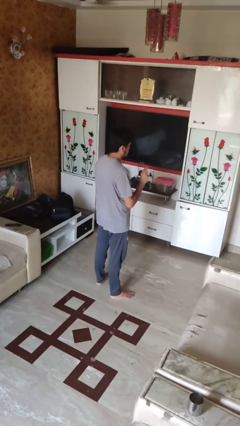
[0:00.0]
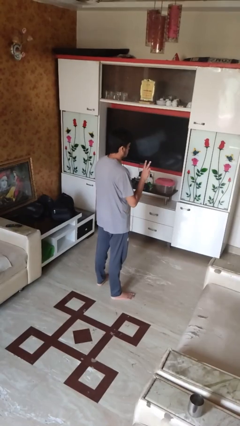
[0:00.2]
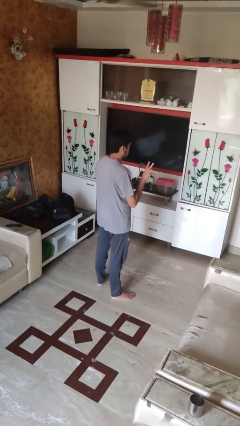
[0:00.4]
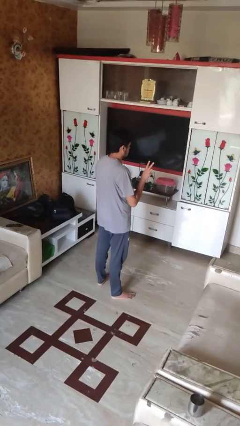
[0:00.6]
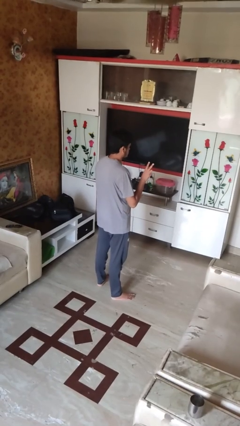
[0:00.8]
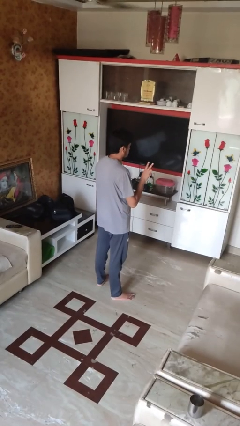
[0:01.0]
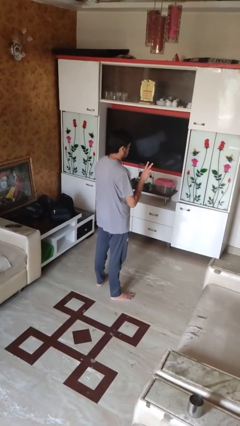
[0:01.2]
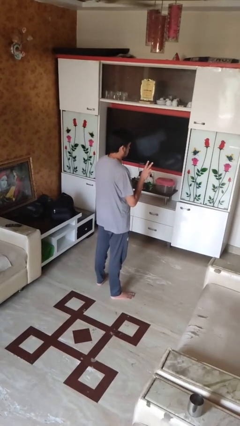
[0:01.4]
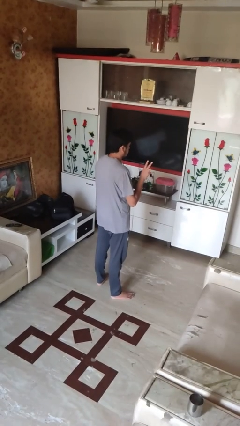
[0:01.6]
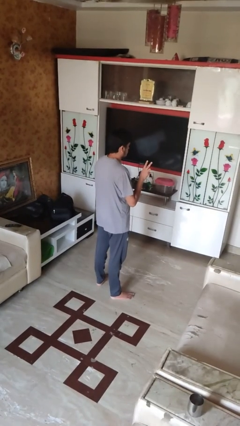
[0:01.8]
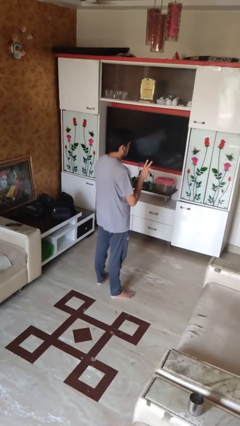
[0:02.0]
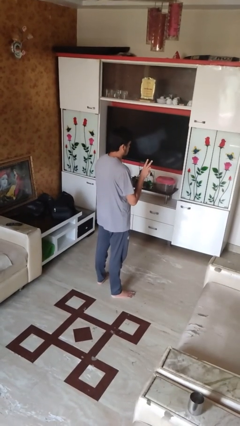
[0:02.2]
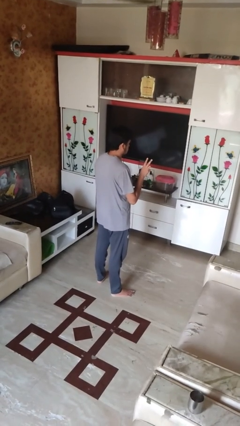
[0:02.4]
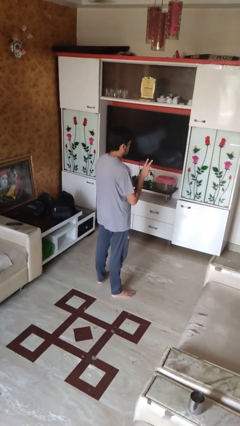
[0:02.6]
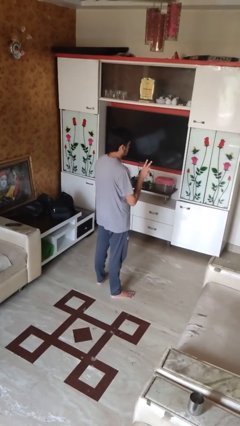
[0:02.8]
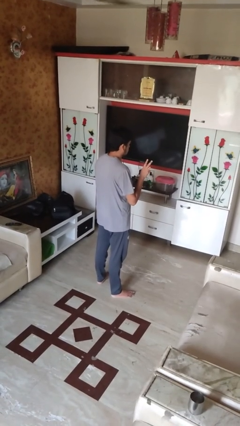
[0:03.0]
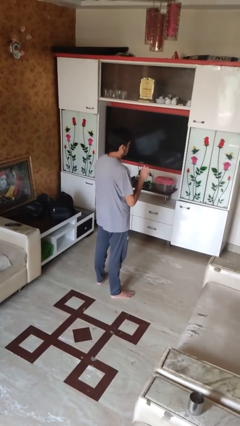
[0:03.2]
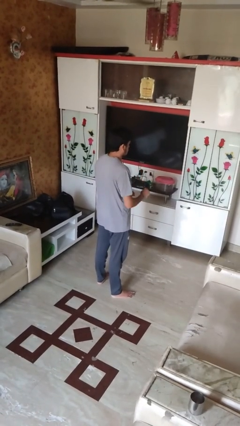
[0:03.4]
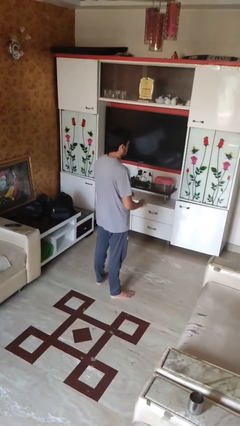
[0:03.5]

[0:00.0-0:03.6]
person gestures peace

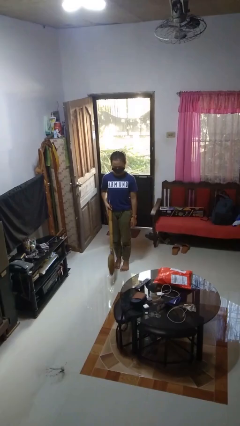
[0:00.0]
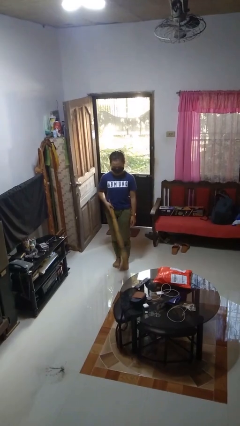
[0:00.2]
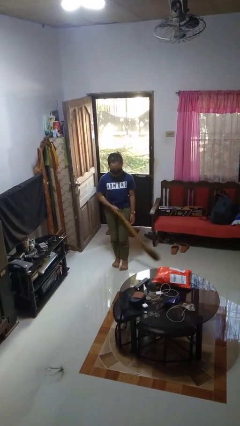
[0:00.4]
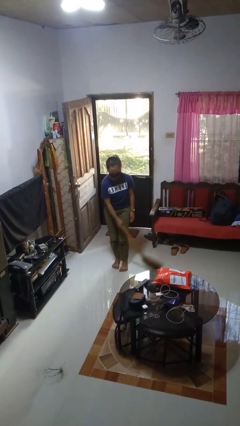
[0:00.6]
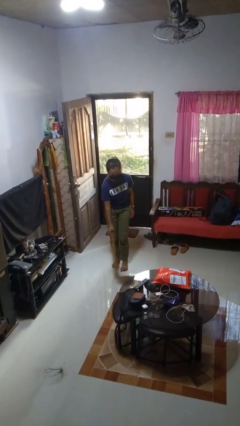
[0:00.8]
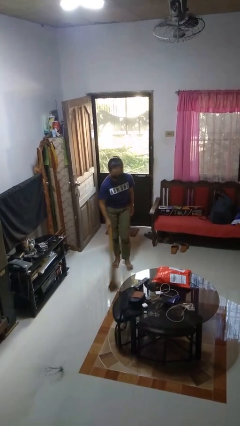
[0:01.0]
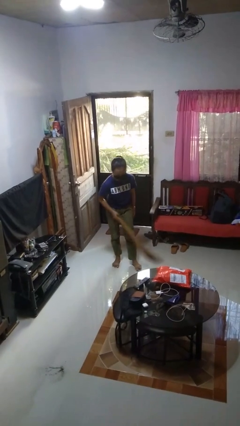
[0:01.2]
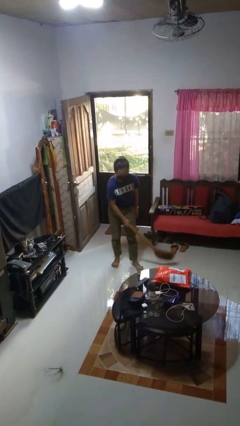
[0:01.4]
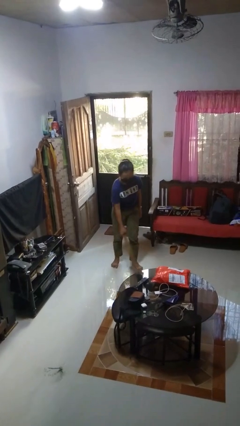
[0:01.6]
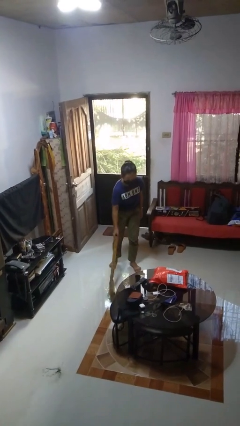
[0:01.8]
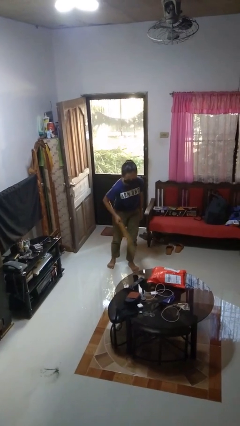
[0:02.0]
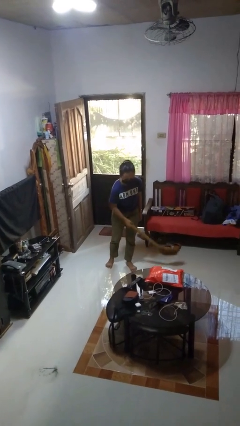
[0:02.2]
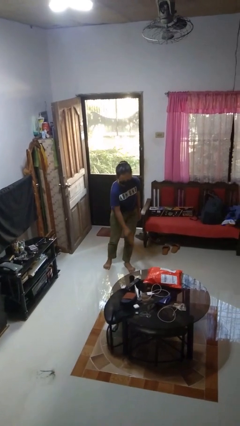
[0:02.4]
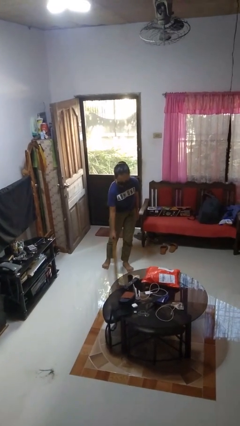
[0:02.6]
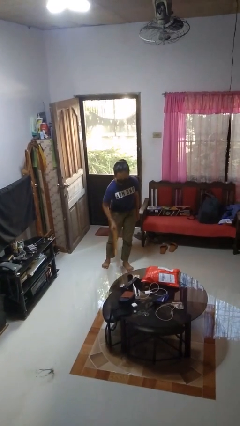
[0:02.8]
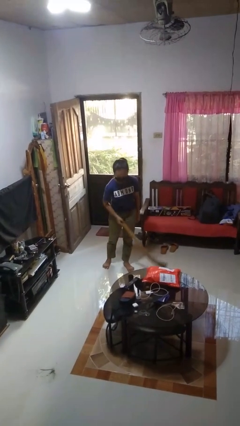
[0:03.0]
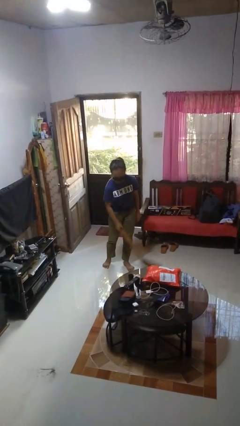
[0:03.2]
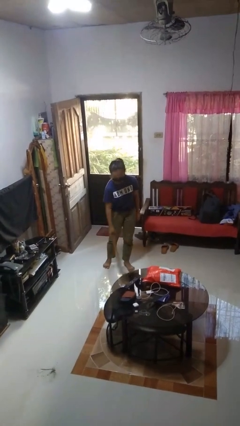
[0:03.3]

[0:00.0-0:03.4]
person sweeps floor

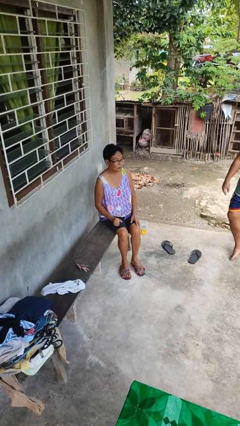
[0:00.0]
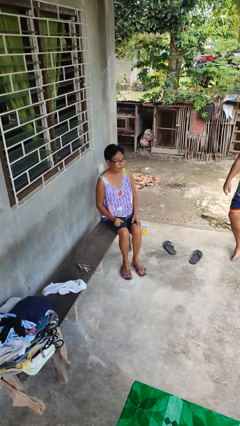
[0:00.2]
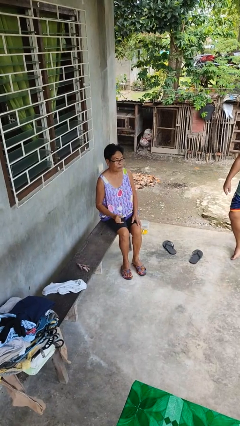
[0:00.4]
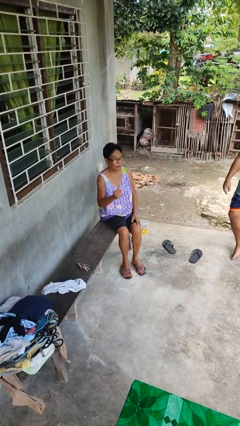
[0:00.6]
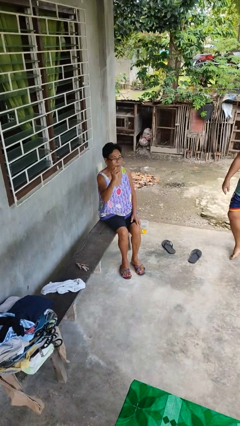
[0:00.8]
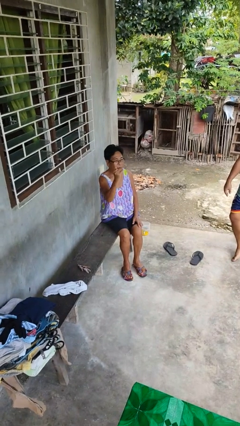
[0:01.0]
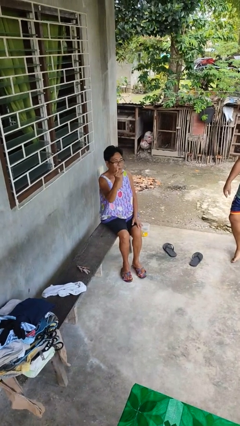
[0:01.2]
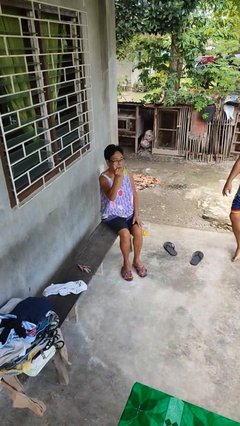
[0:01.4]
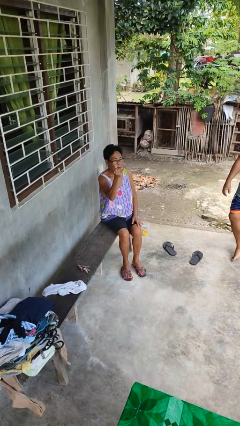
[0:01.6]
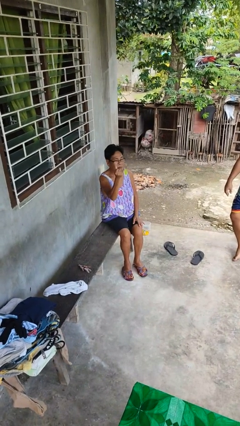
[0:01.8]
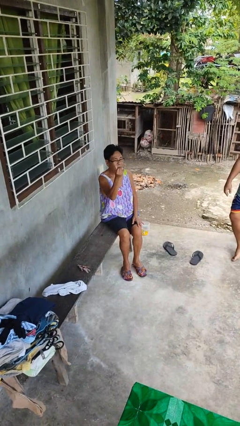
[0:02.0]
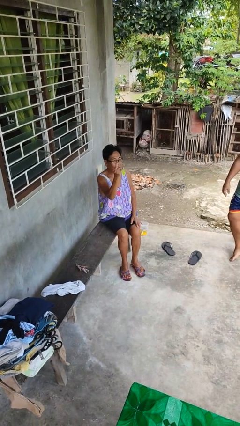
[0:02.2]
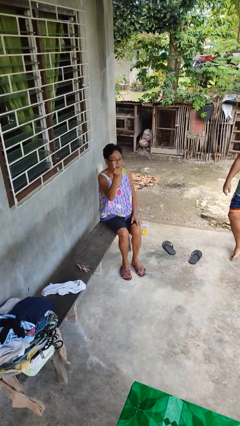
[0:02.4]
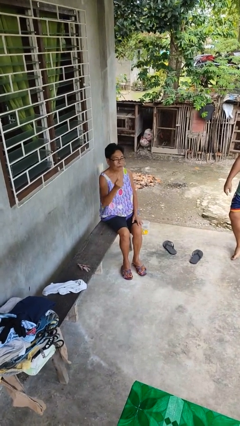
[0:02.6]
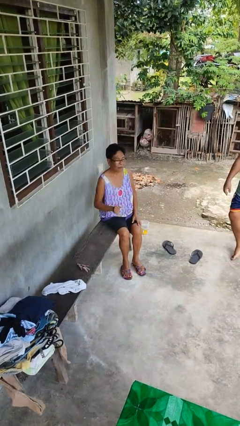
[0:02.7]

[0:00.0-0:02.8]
person gestures hang loose

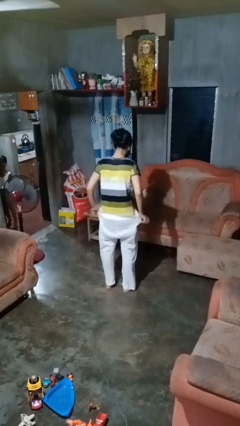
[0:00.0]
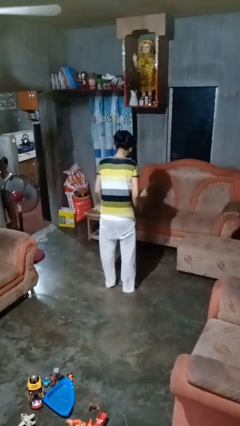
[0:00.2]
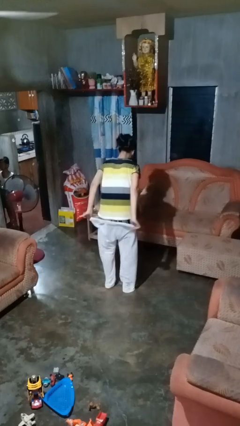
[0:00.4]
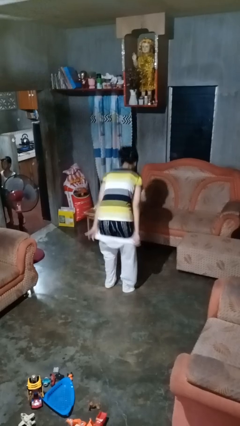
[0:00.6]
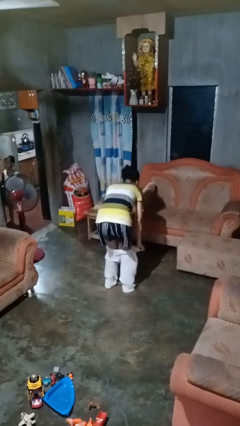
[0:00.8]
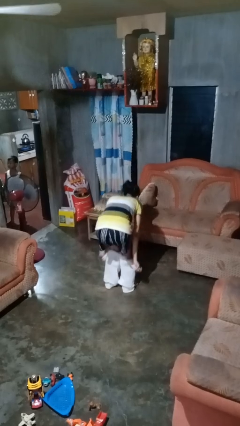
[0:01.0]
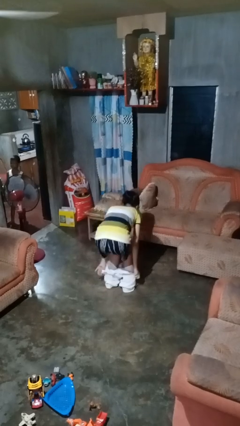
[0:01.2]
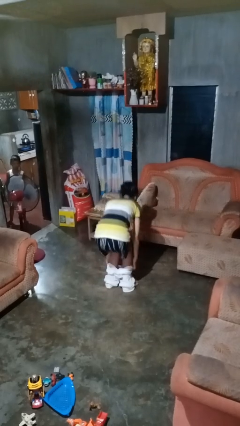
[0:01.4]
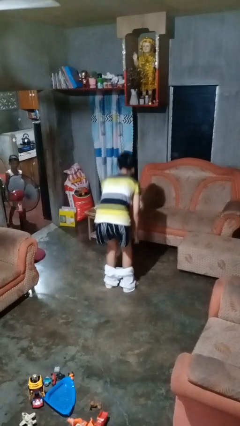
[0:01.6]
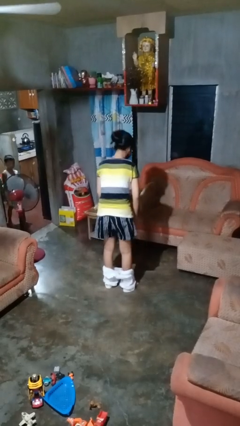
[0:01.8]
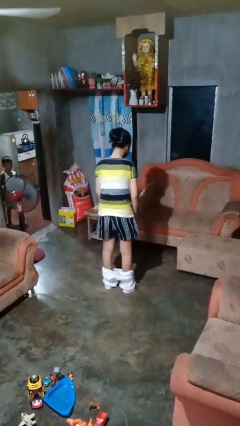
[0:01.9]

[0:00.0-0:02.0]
person takes off pants

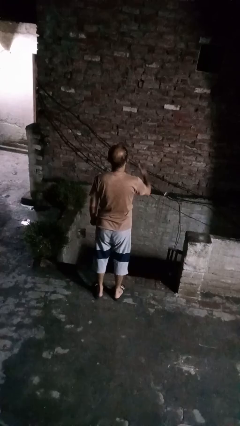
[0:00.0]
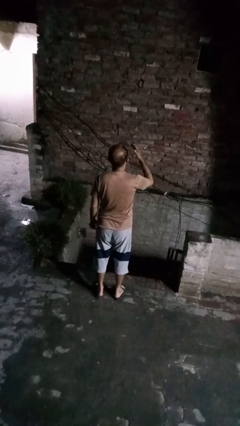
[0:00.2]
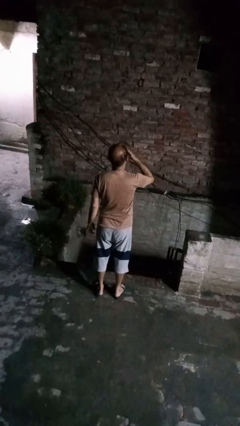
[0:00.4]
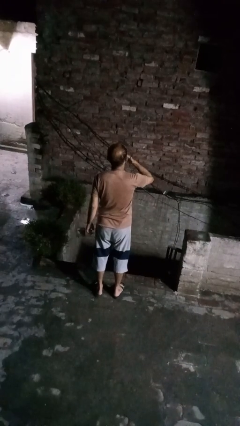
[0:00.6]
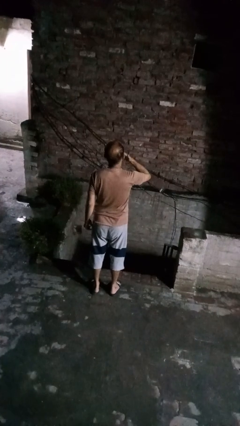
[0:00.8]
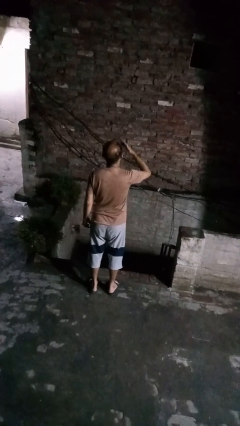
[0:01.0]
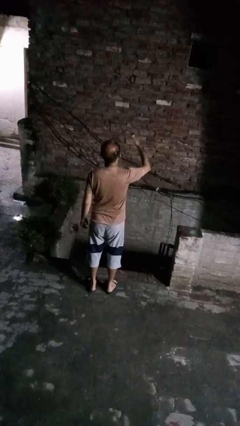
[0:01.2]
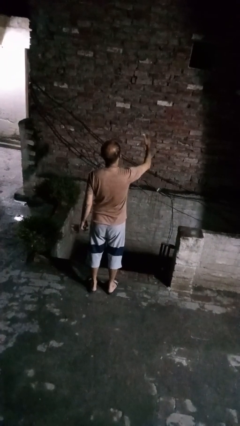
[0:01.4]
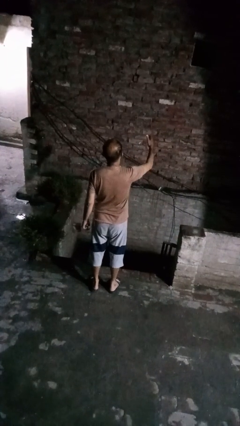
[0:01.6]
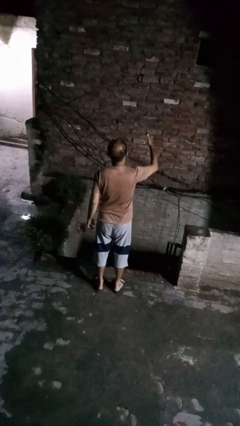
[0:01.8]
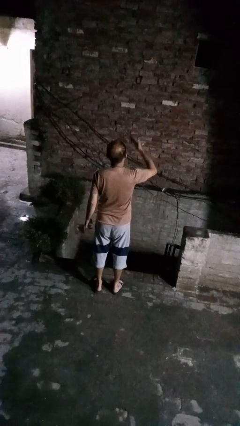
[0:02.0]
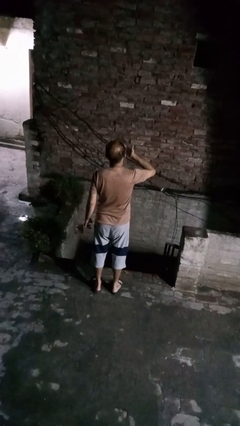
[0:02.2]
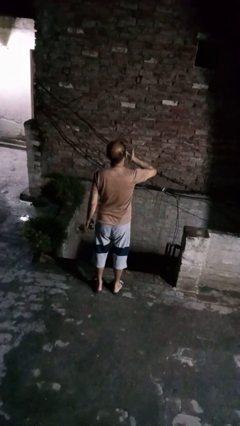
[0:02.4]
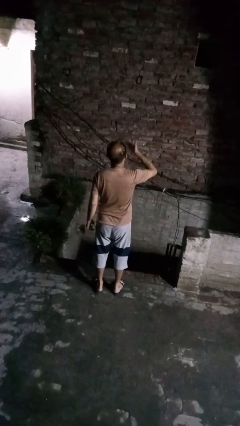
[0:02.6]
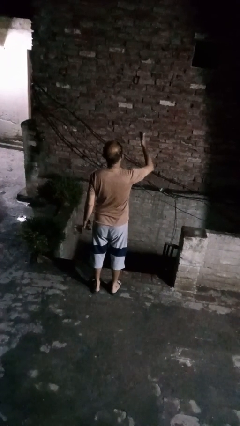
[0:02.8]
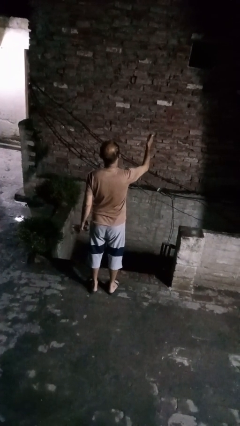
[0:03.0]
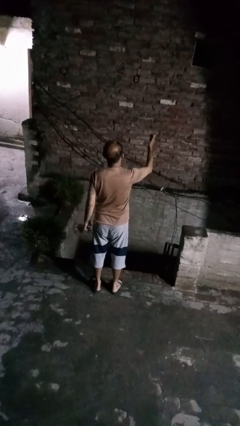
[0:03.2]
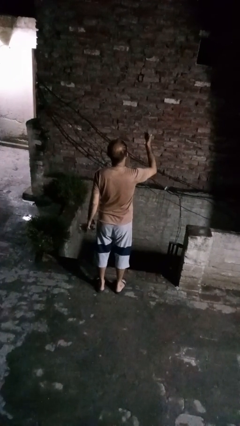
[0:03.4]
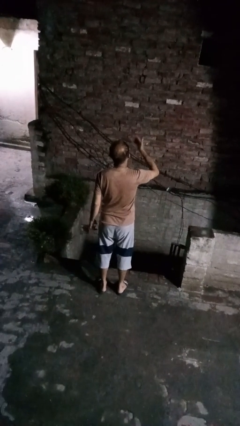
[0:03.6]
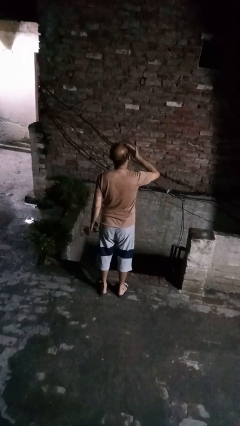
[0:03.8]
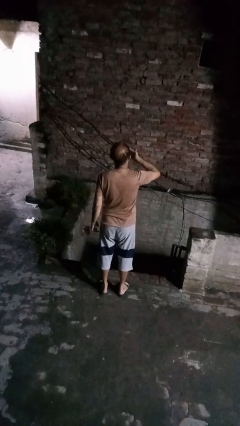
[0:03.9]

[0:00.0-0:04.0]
person gestures blow kiss

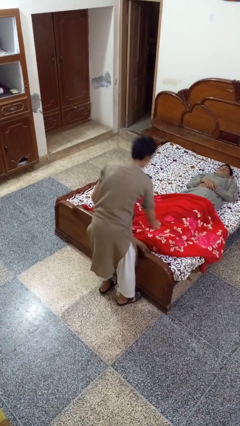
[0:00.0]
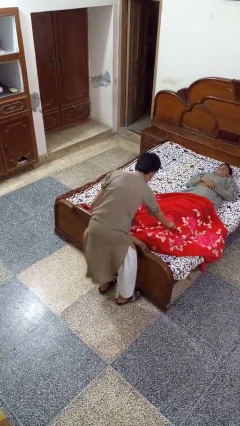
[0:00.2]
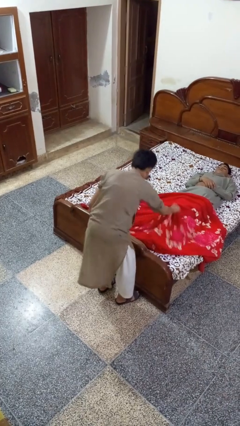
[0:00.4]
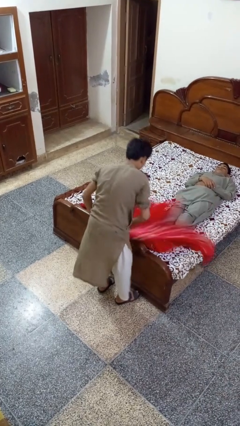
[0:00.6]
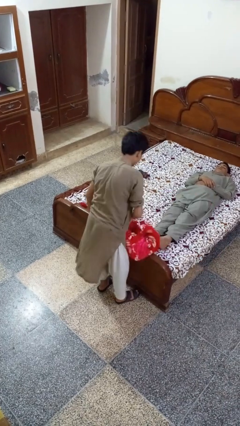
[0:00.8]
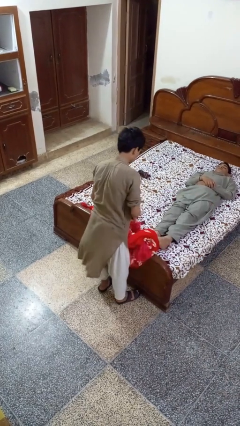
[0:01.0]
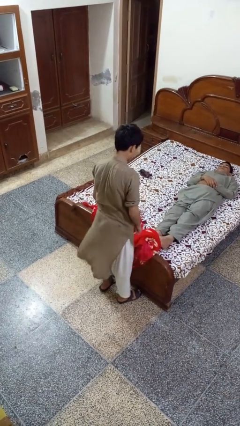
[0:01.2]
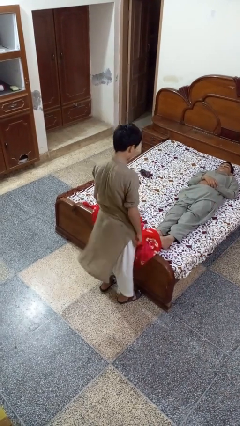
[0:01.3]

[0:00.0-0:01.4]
person uncovers friend with blanket
